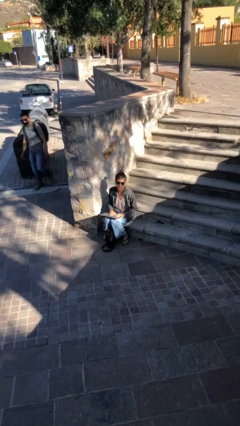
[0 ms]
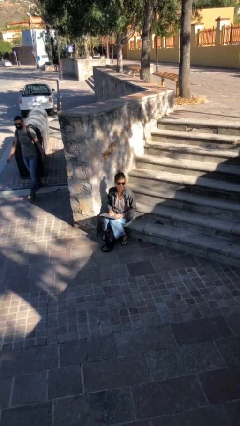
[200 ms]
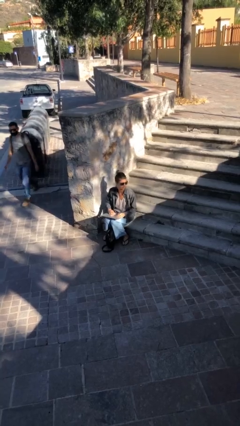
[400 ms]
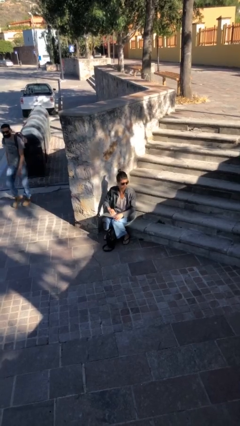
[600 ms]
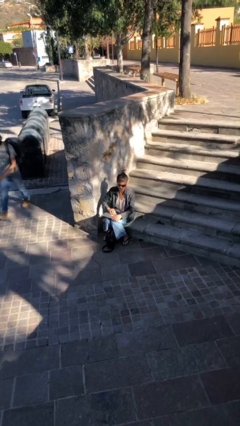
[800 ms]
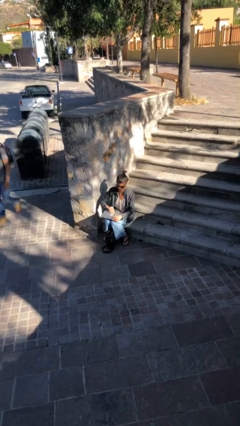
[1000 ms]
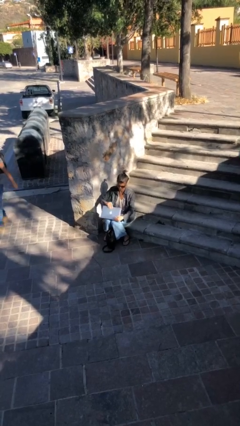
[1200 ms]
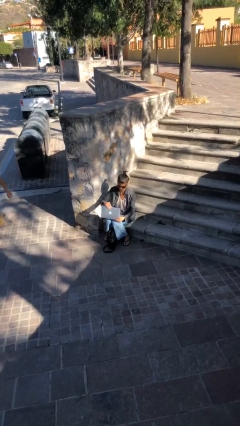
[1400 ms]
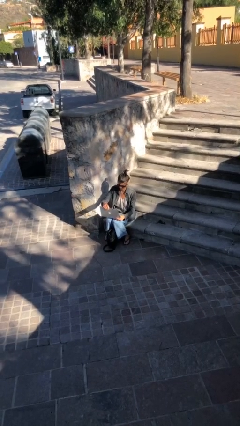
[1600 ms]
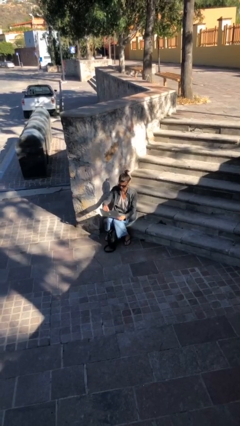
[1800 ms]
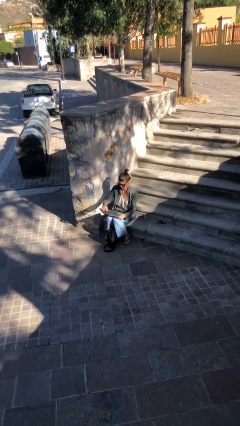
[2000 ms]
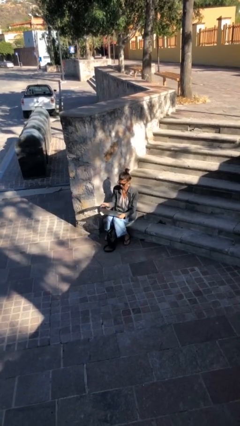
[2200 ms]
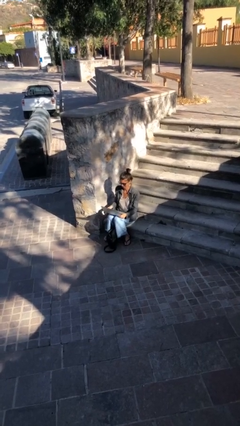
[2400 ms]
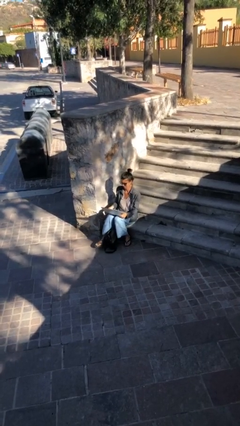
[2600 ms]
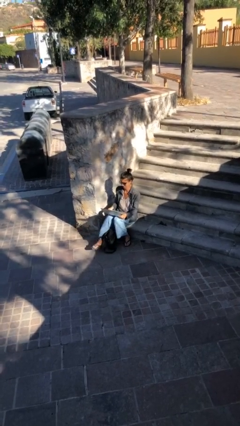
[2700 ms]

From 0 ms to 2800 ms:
person interacts with laptop

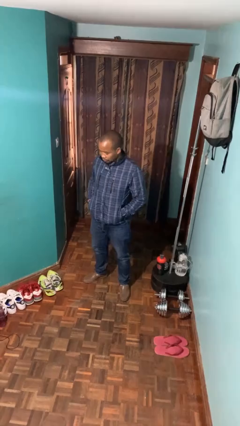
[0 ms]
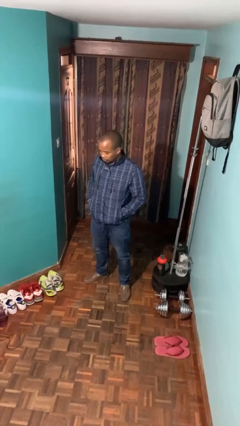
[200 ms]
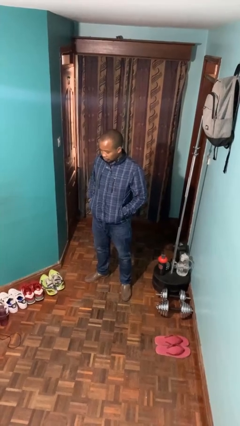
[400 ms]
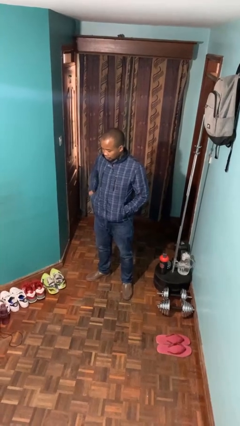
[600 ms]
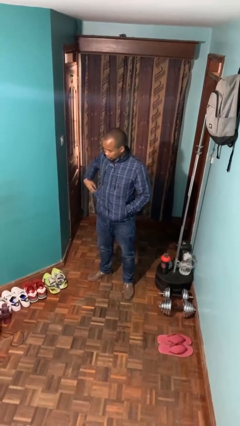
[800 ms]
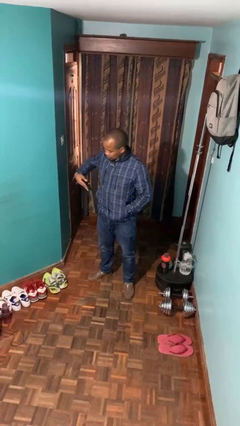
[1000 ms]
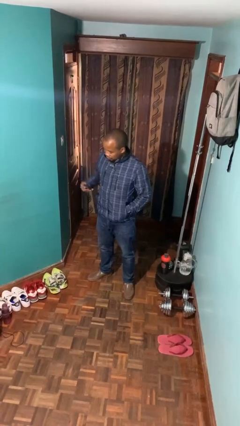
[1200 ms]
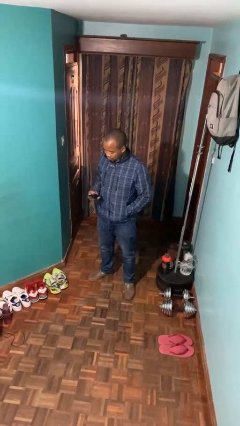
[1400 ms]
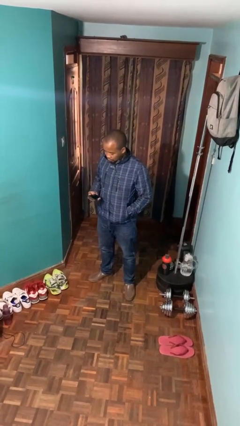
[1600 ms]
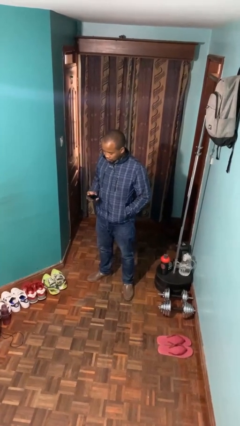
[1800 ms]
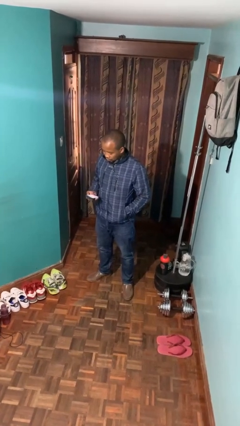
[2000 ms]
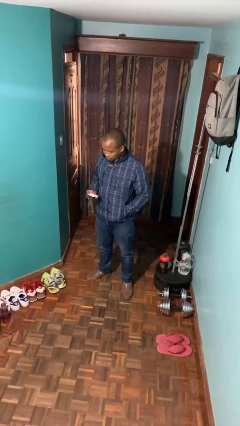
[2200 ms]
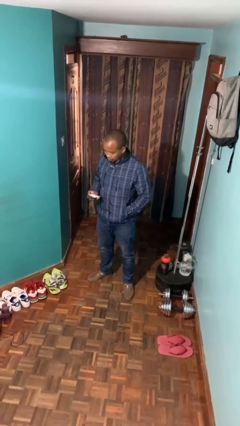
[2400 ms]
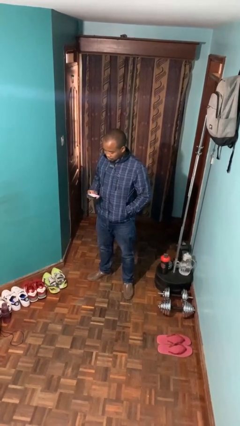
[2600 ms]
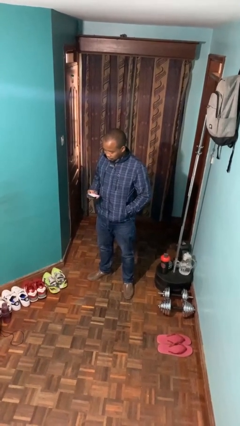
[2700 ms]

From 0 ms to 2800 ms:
person takes phone from pocket

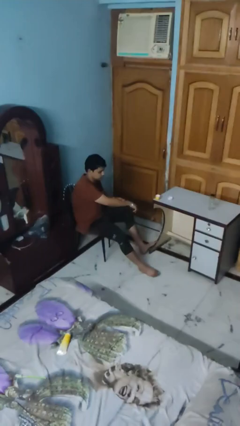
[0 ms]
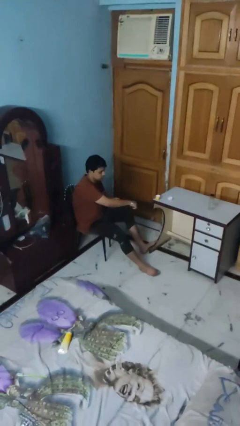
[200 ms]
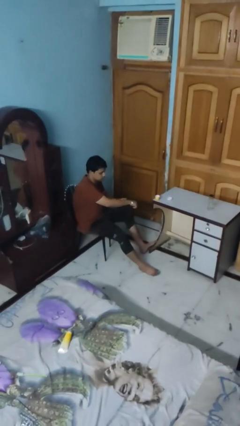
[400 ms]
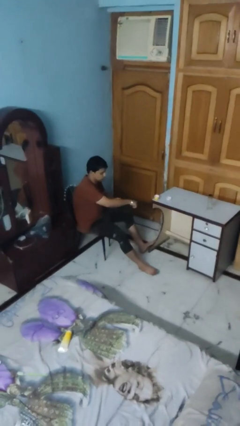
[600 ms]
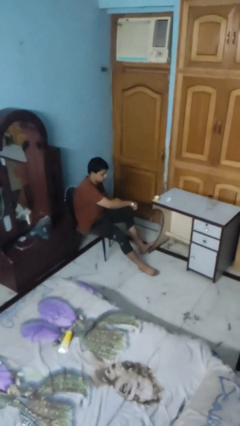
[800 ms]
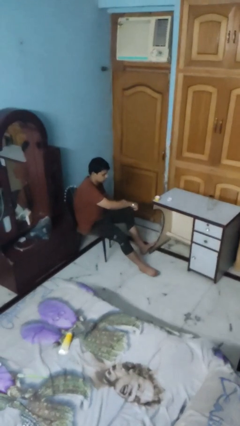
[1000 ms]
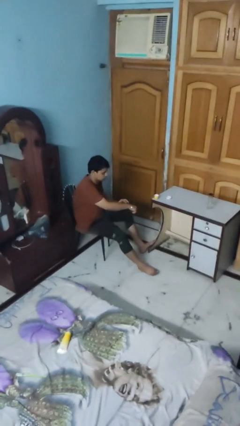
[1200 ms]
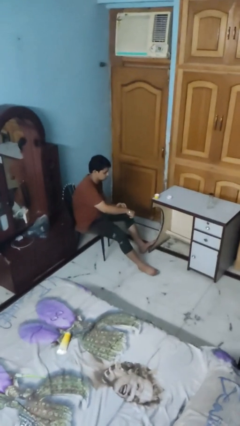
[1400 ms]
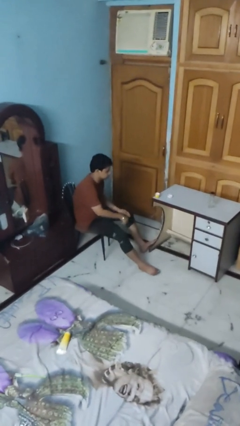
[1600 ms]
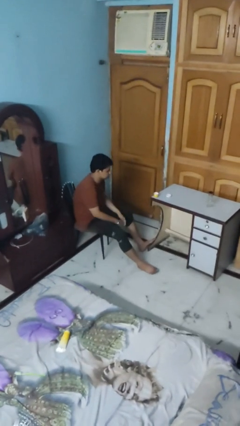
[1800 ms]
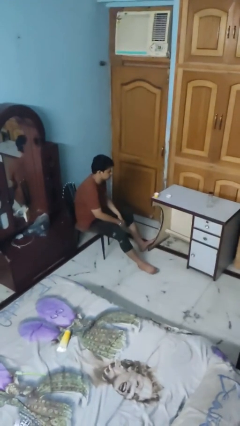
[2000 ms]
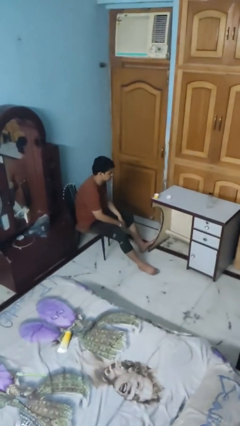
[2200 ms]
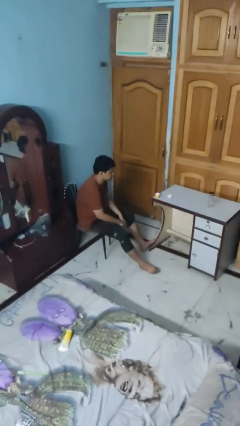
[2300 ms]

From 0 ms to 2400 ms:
person applies sunscreen

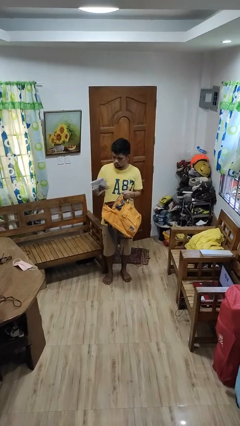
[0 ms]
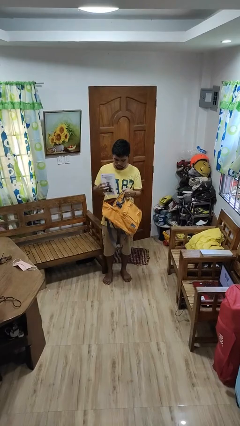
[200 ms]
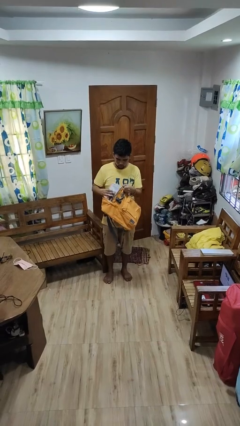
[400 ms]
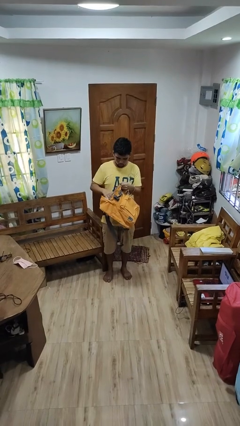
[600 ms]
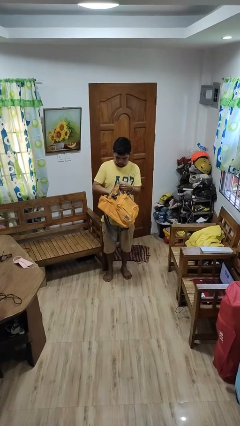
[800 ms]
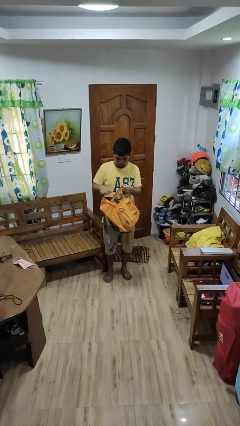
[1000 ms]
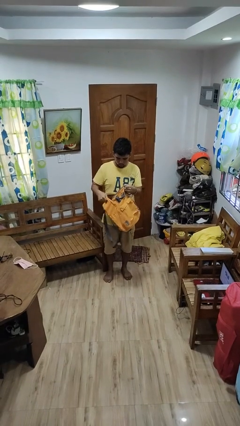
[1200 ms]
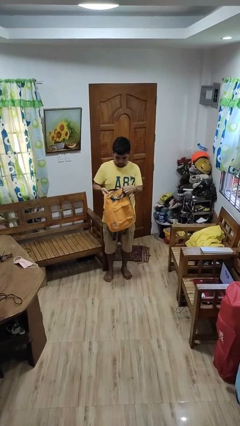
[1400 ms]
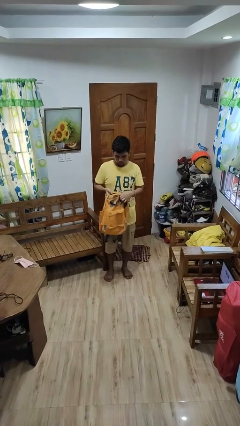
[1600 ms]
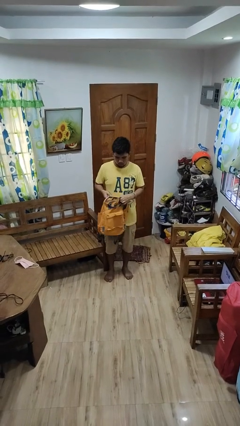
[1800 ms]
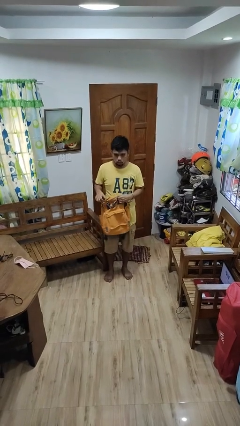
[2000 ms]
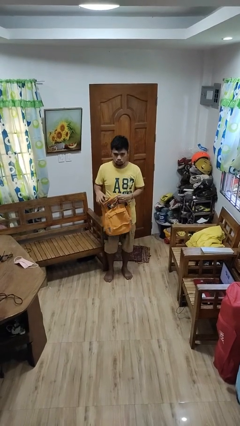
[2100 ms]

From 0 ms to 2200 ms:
person puts object into backpack

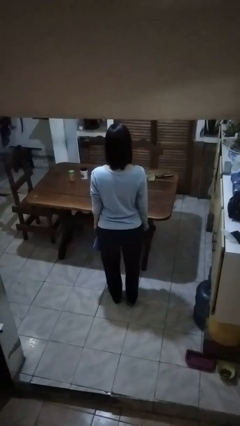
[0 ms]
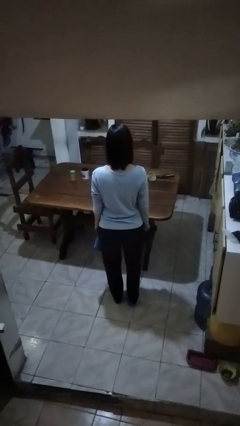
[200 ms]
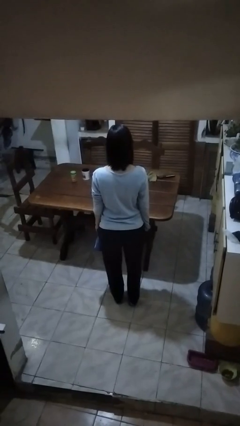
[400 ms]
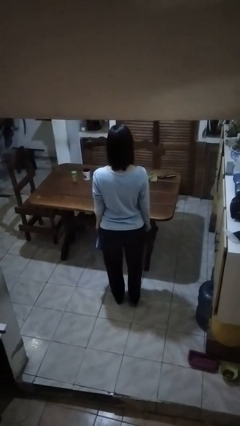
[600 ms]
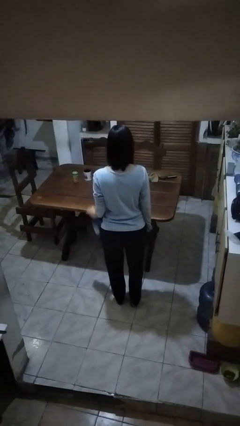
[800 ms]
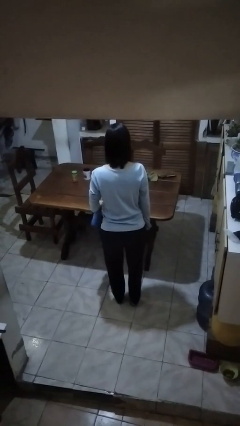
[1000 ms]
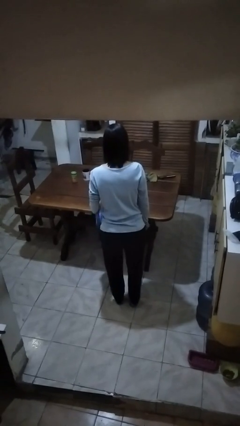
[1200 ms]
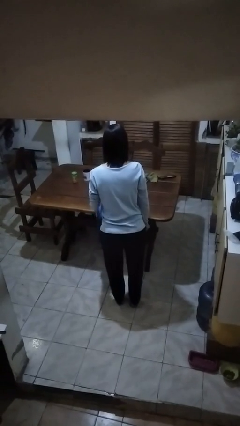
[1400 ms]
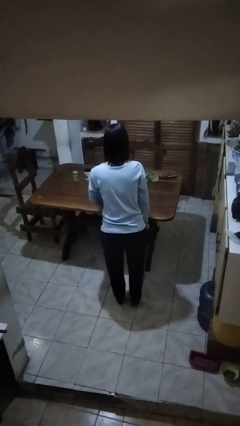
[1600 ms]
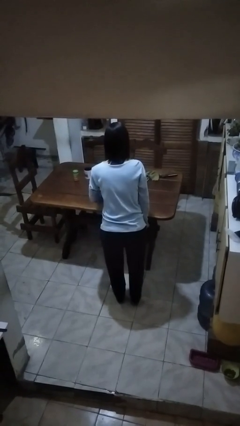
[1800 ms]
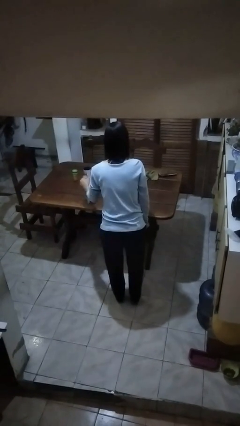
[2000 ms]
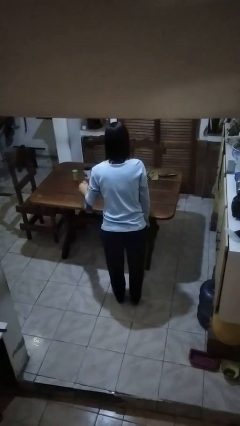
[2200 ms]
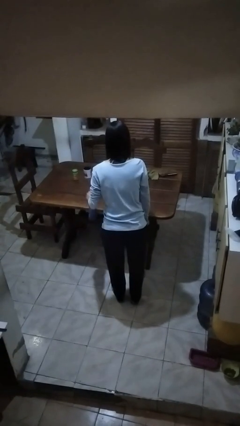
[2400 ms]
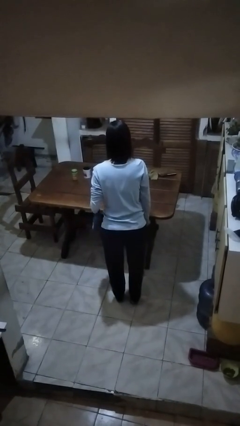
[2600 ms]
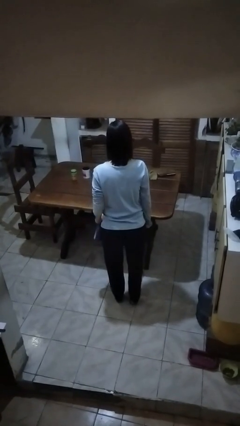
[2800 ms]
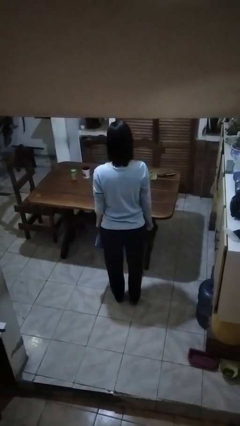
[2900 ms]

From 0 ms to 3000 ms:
person sprays from bottle

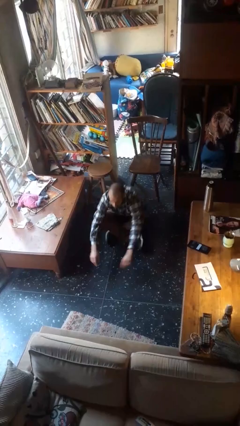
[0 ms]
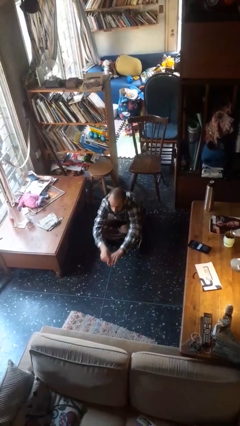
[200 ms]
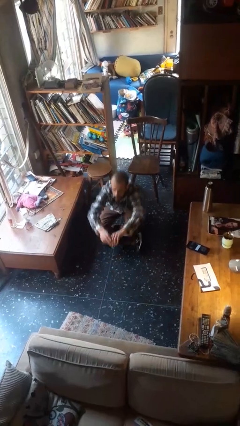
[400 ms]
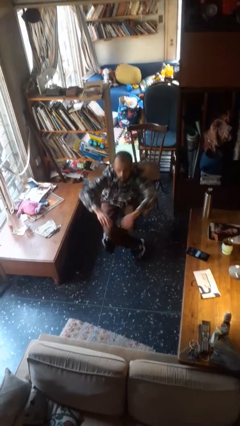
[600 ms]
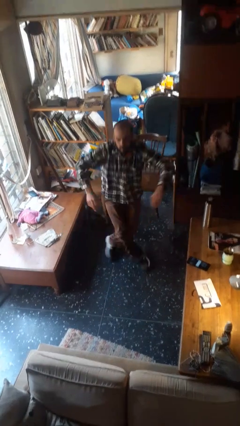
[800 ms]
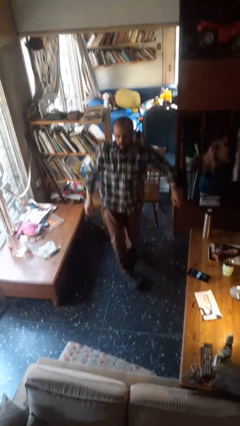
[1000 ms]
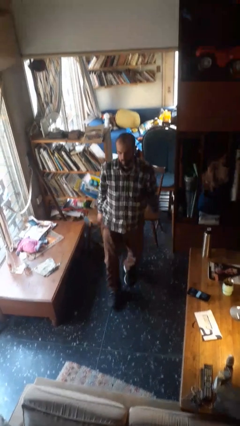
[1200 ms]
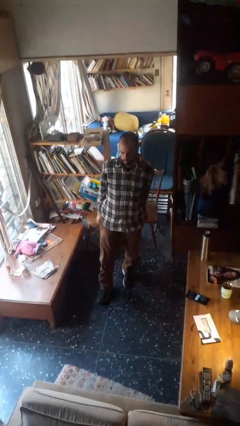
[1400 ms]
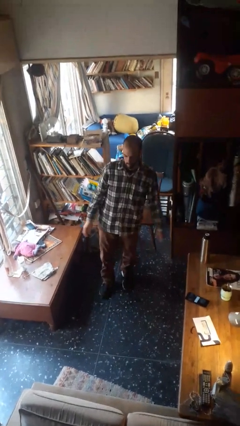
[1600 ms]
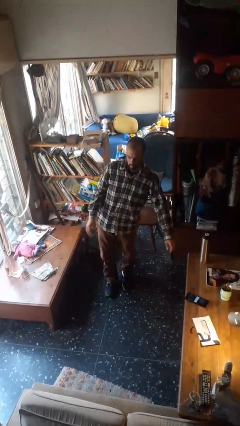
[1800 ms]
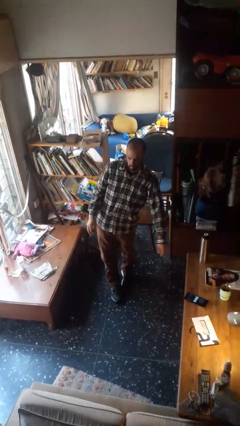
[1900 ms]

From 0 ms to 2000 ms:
person stands up from floor

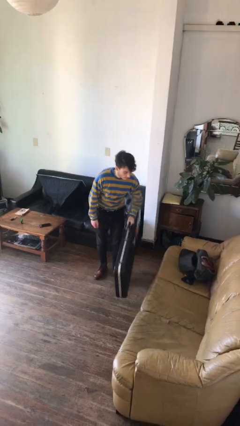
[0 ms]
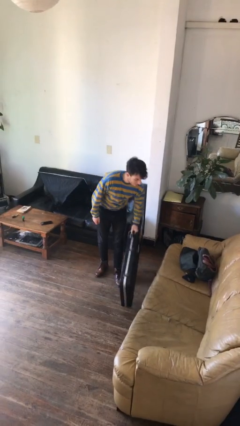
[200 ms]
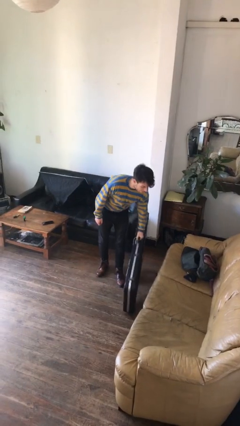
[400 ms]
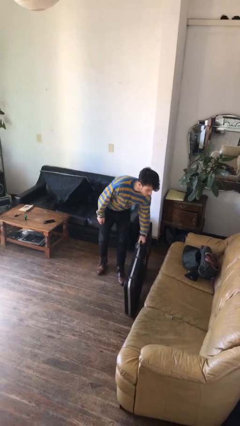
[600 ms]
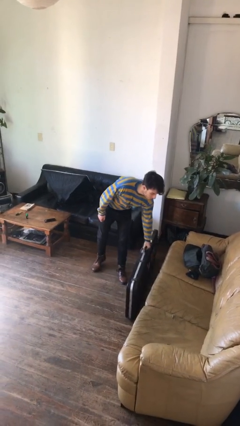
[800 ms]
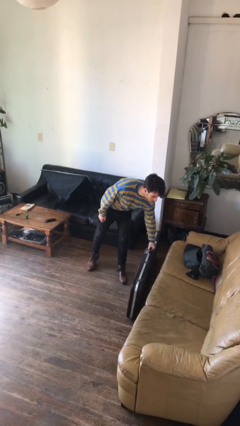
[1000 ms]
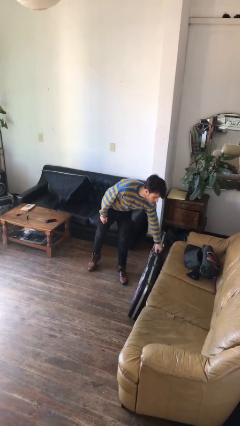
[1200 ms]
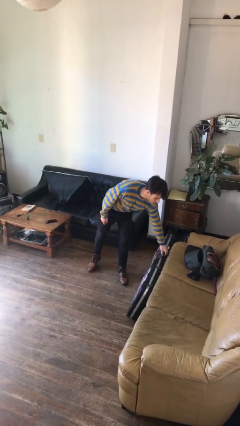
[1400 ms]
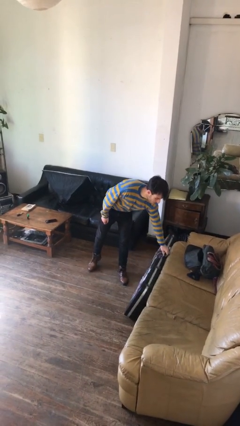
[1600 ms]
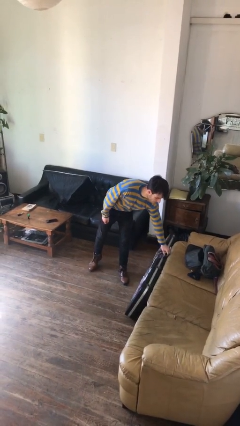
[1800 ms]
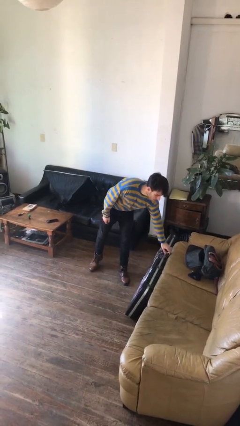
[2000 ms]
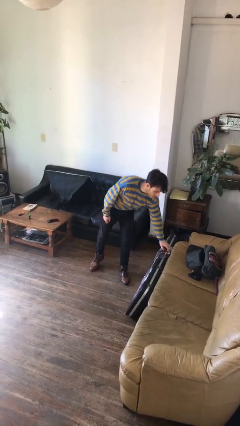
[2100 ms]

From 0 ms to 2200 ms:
person puts down object on floor
